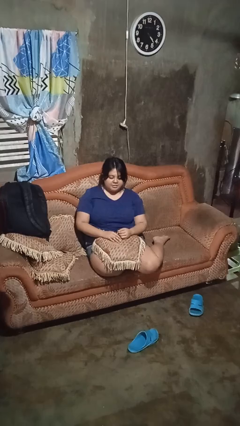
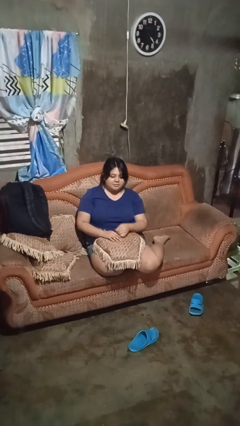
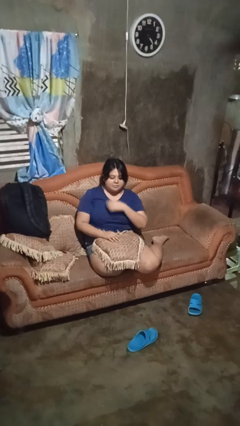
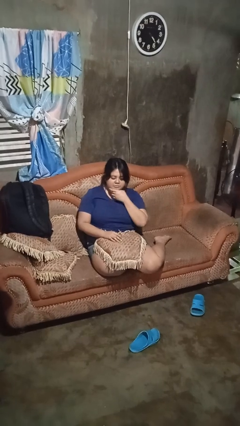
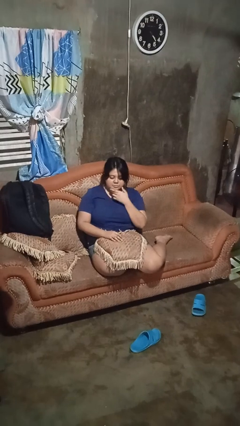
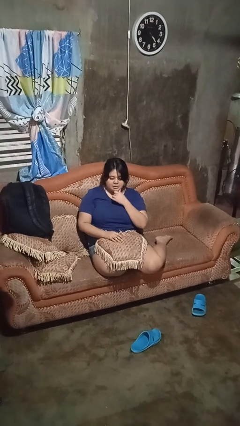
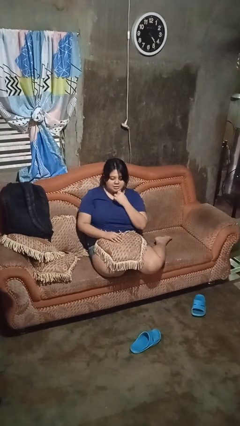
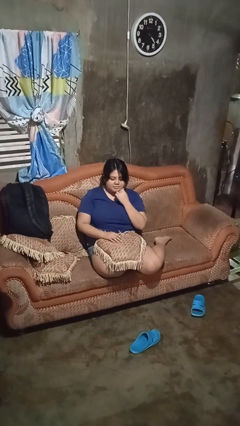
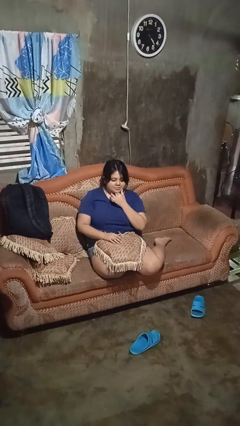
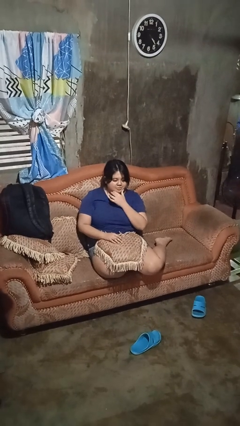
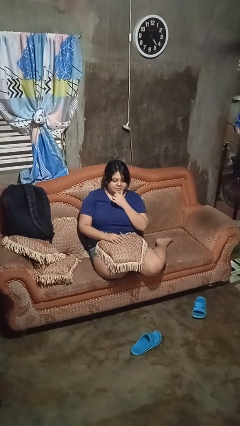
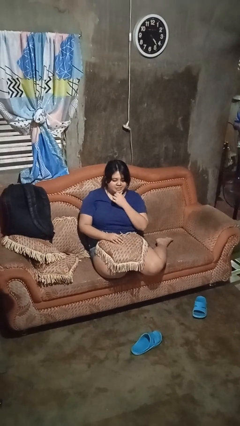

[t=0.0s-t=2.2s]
person strokes chin

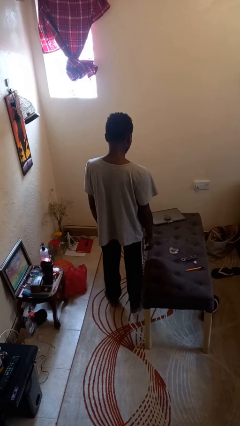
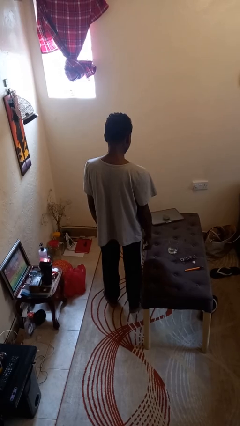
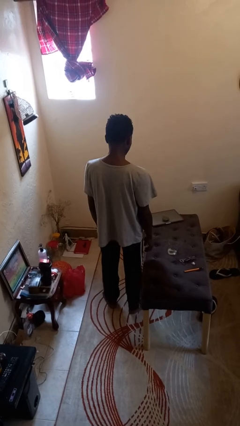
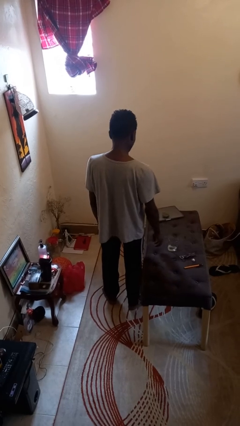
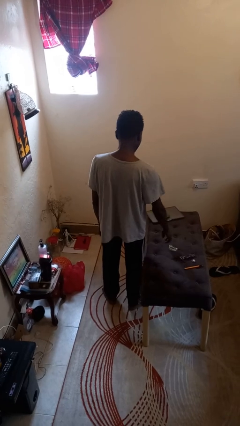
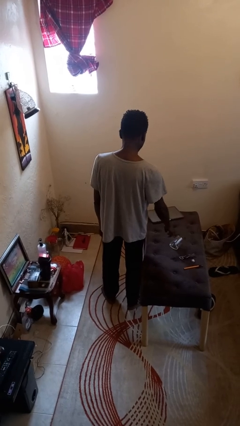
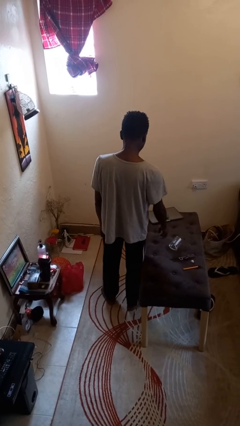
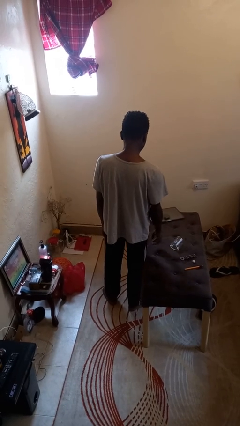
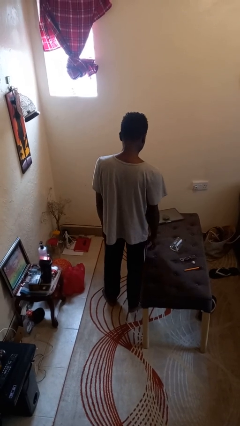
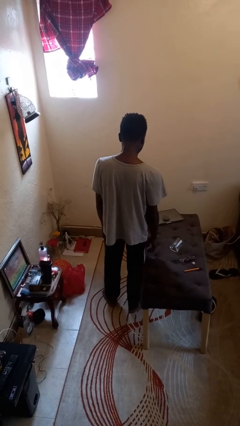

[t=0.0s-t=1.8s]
person knocks over glass

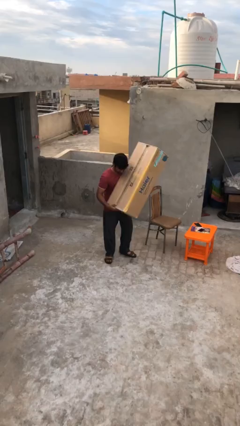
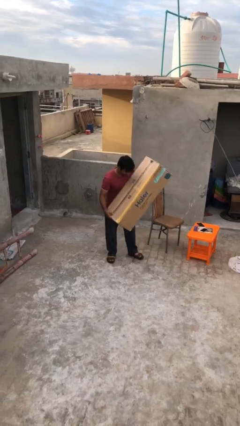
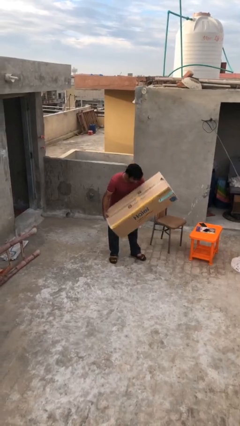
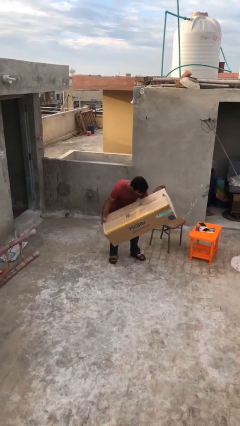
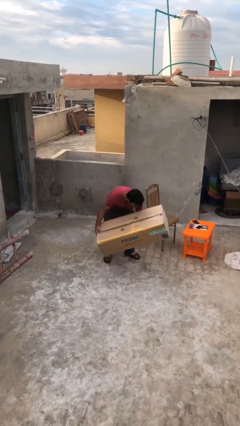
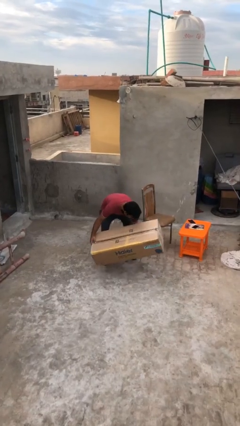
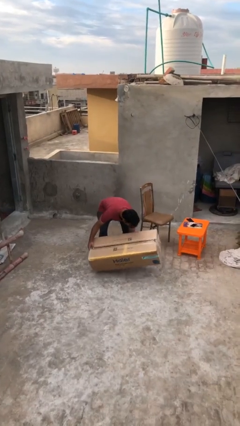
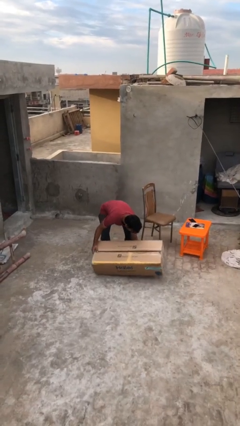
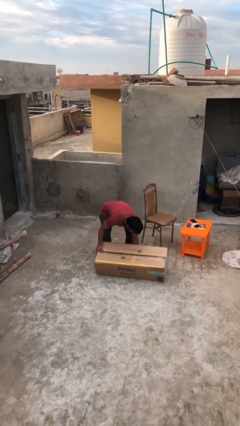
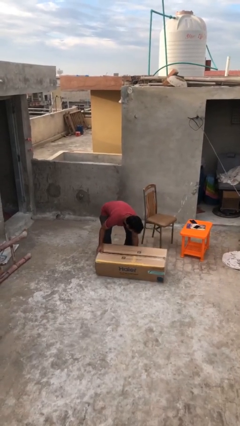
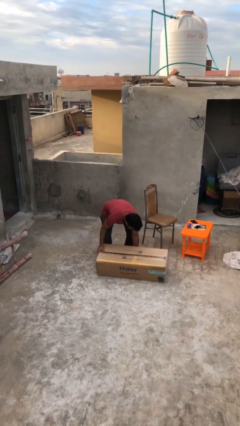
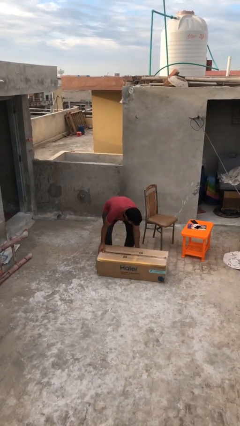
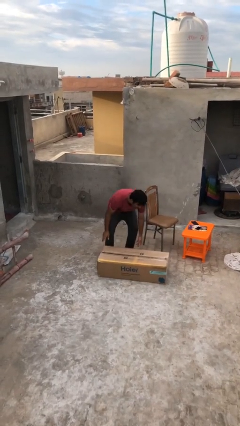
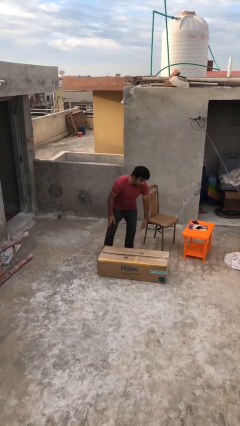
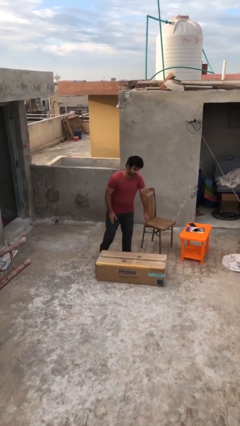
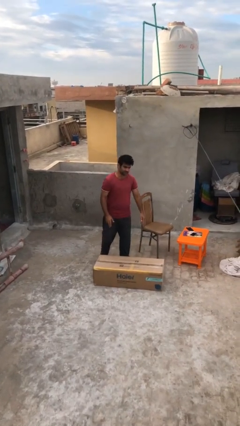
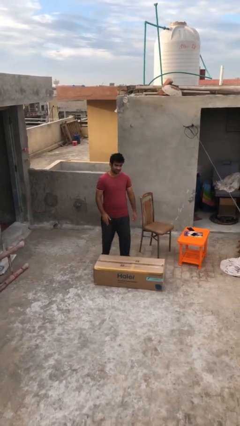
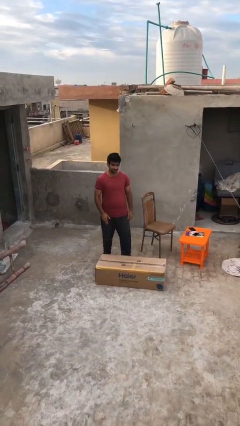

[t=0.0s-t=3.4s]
person puts down object on floor

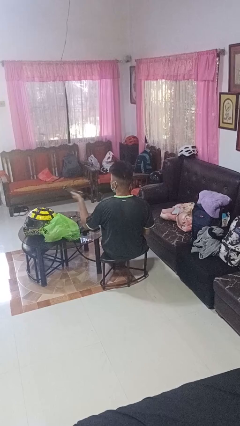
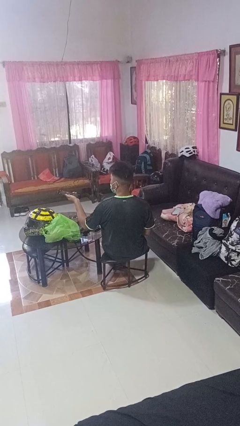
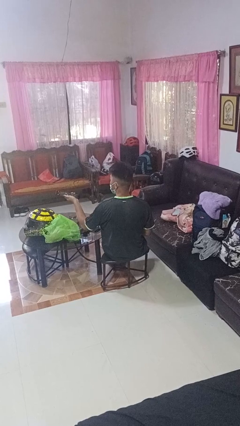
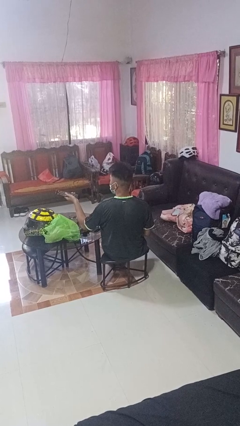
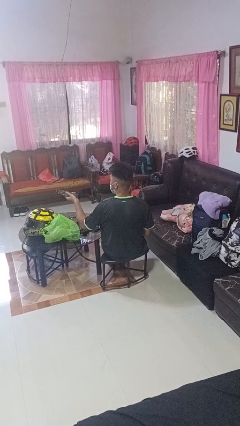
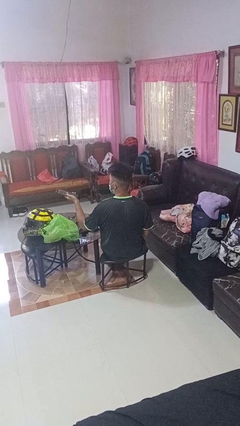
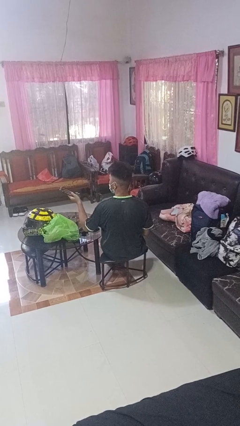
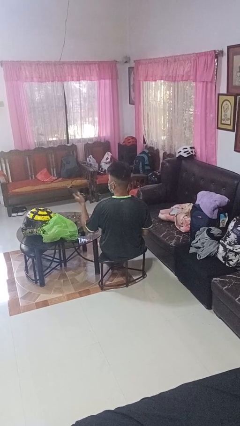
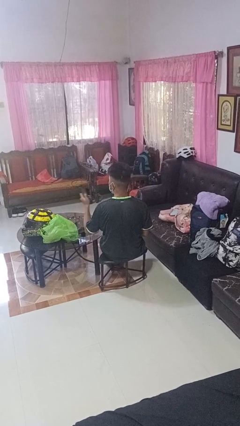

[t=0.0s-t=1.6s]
person uses television remote

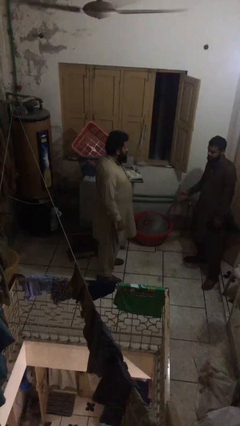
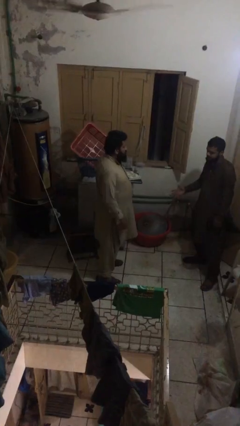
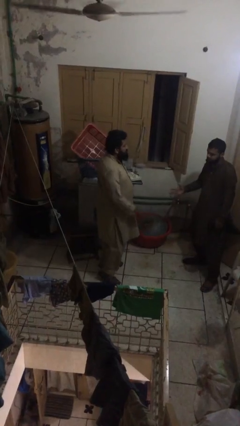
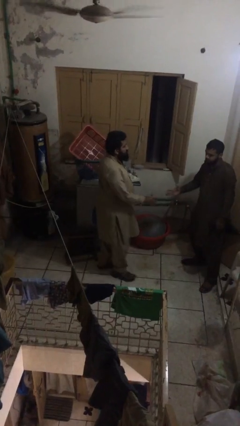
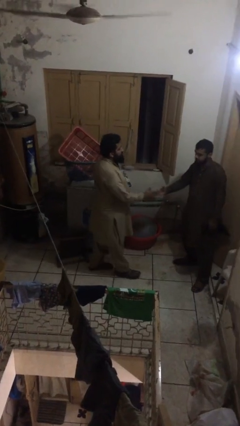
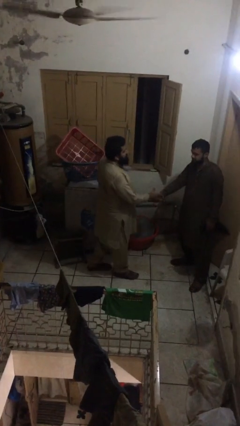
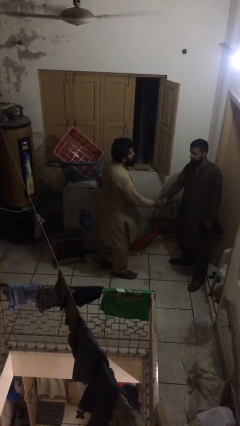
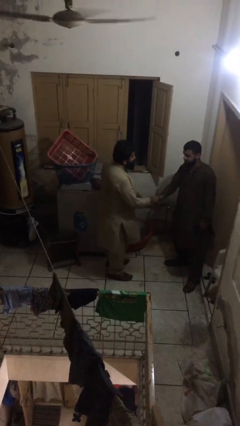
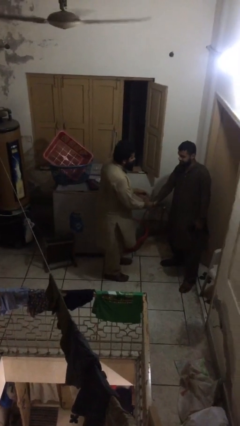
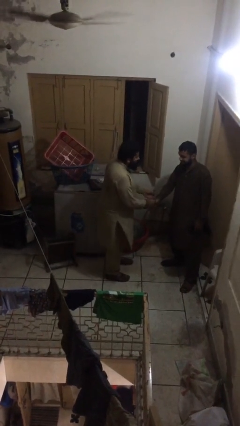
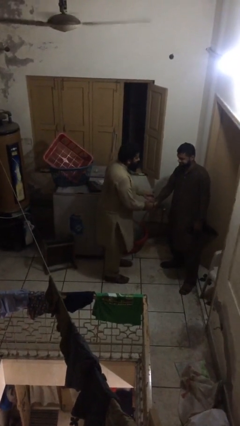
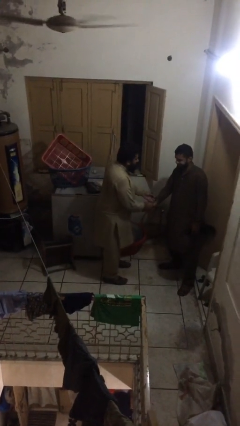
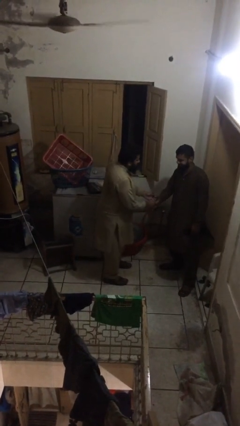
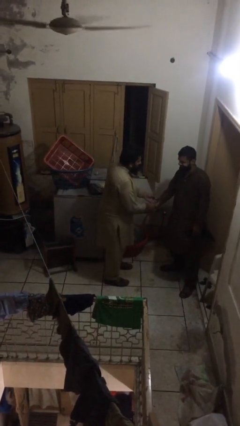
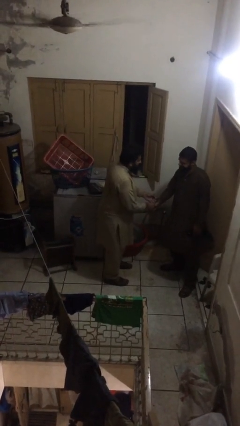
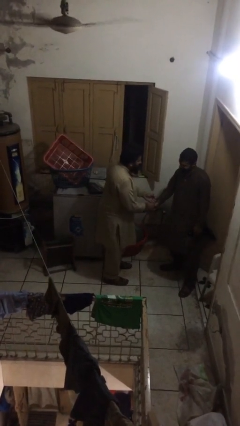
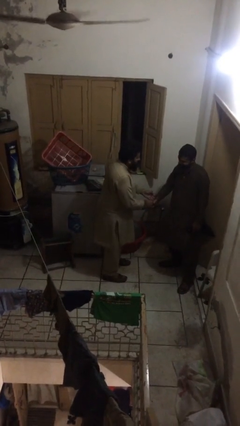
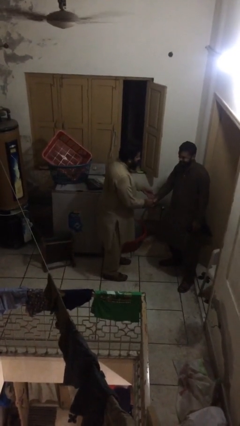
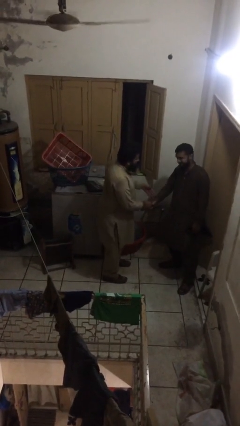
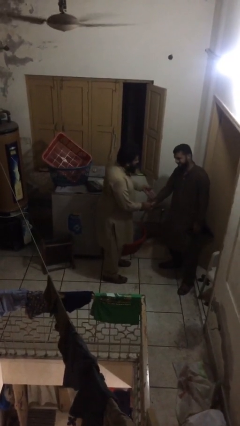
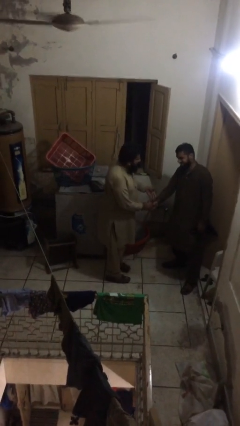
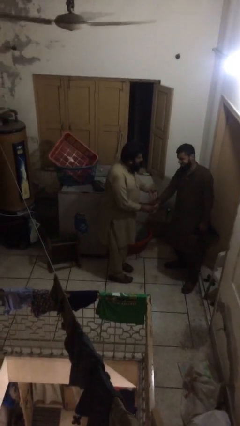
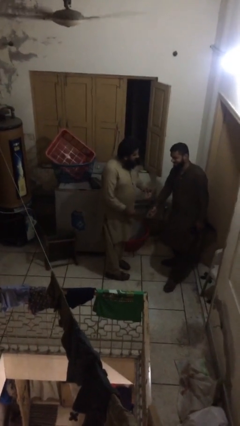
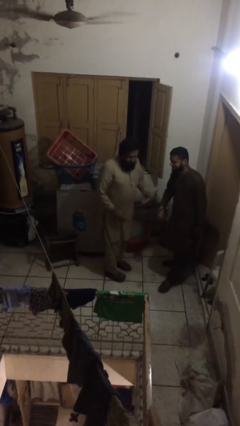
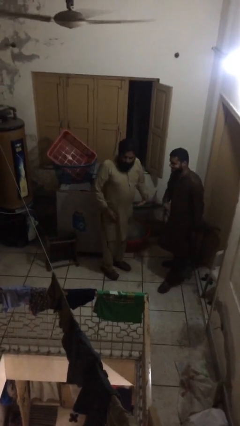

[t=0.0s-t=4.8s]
person shakes hand

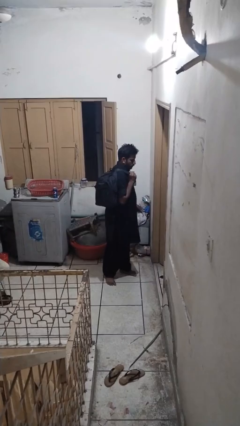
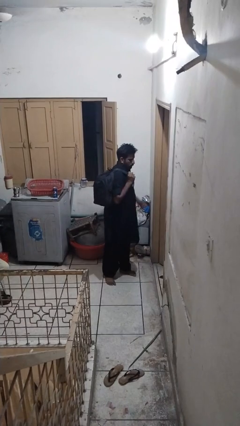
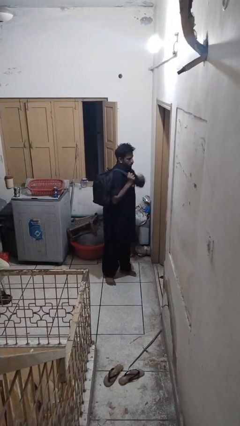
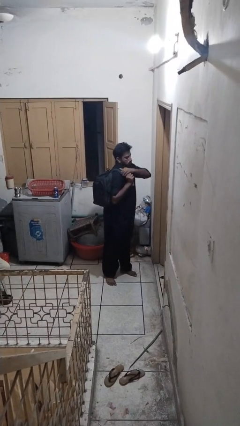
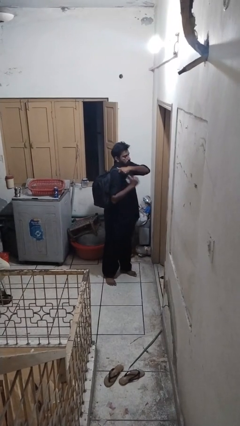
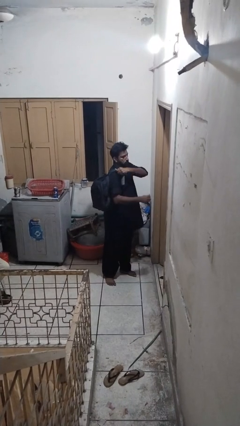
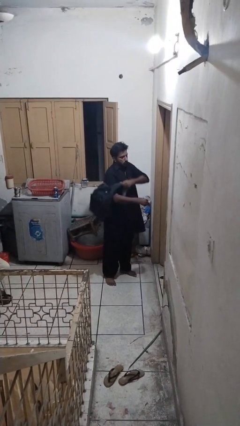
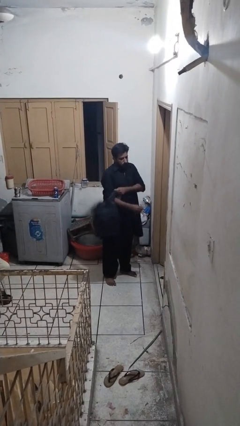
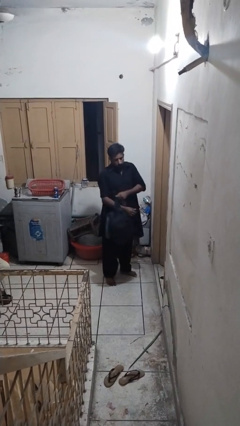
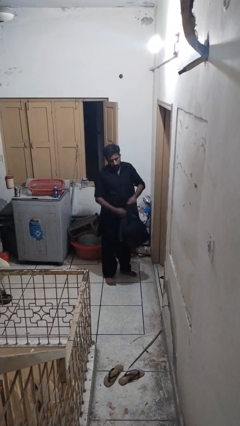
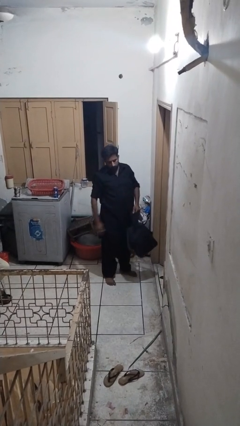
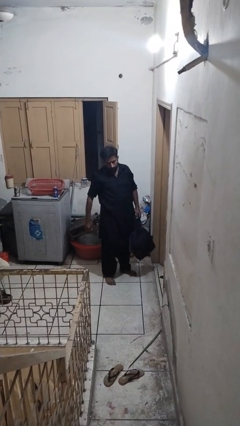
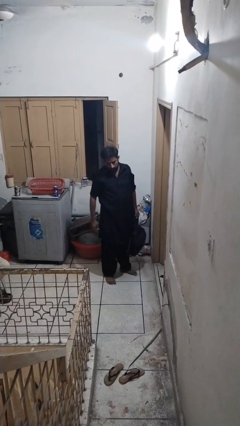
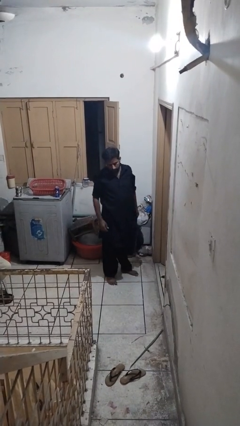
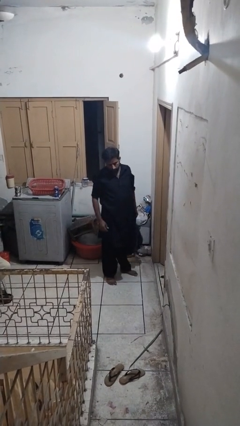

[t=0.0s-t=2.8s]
person takes off backpack

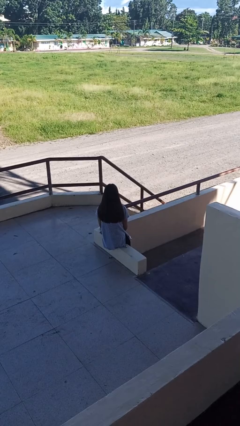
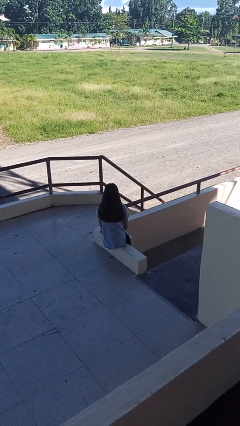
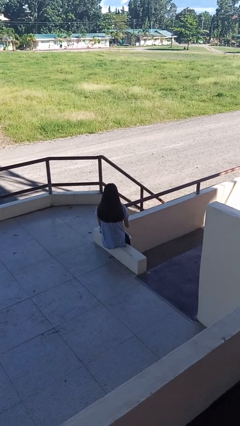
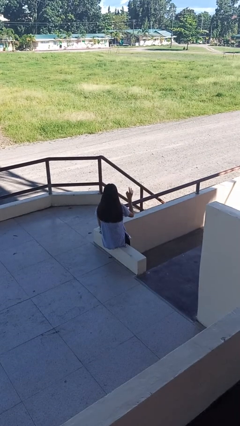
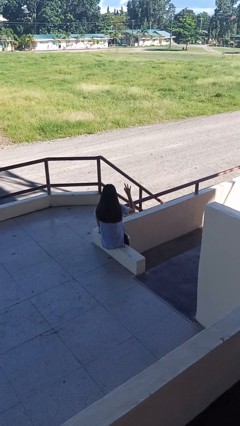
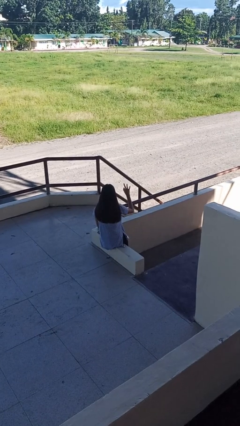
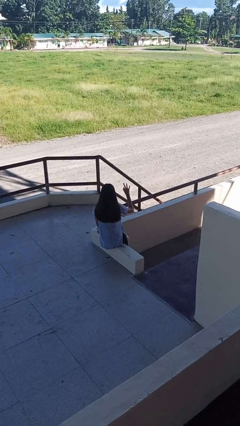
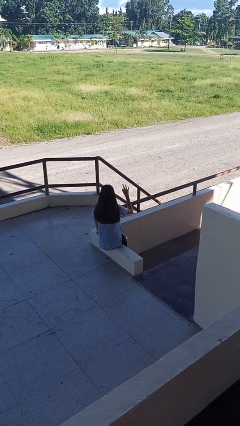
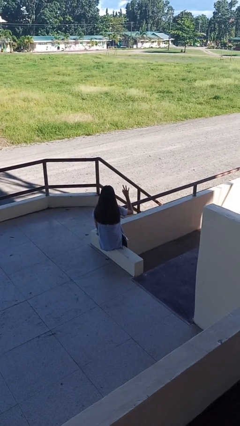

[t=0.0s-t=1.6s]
person gestures number three
